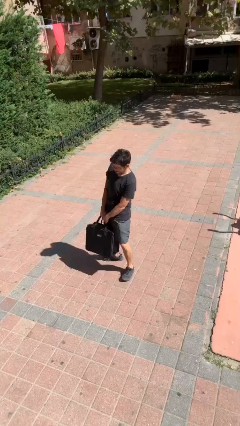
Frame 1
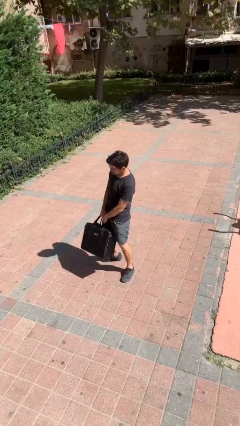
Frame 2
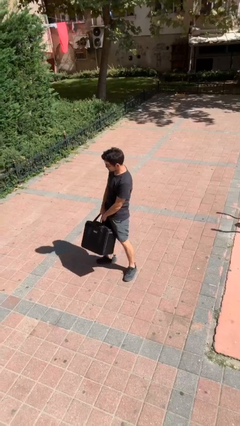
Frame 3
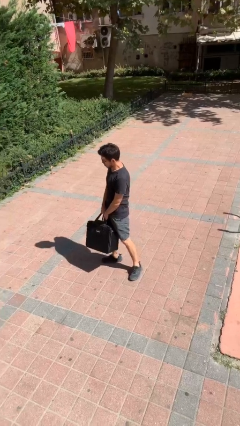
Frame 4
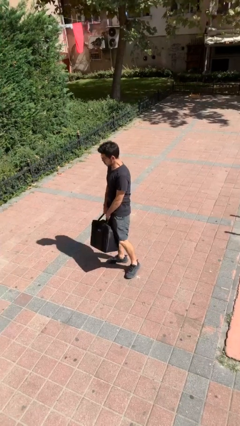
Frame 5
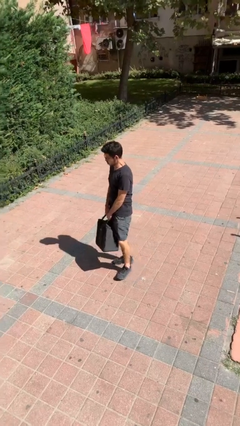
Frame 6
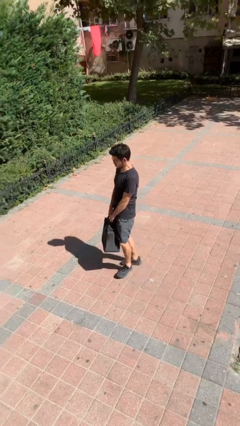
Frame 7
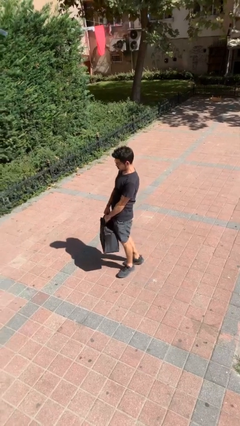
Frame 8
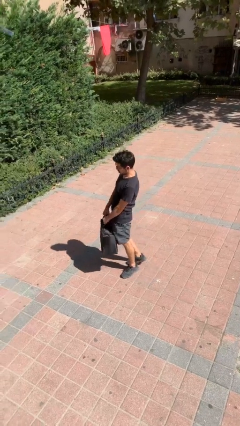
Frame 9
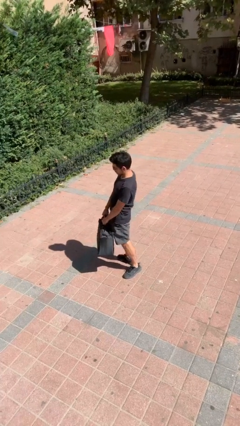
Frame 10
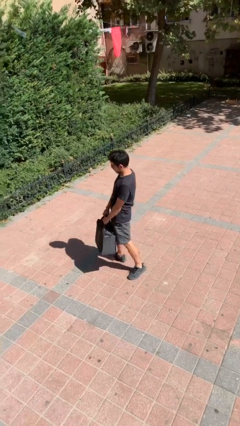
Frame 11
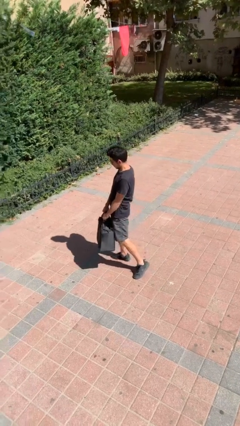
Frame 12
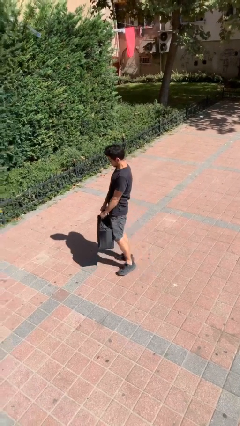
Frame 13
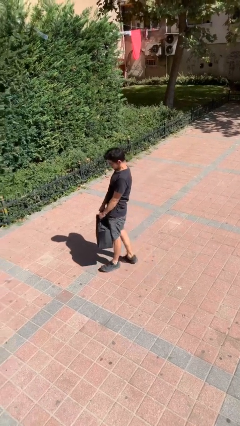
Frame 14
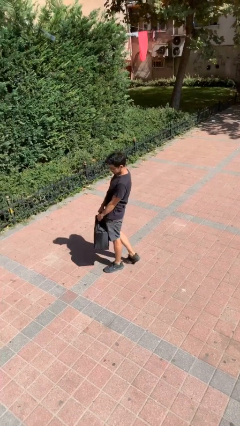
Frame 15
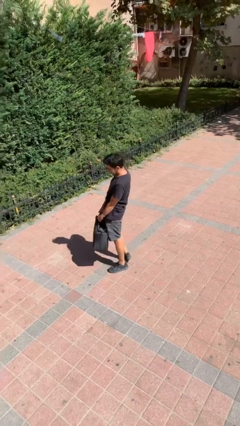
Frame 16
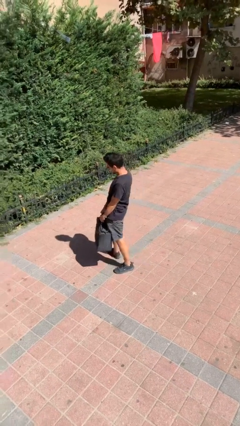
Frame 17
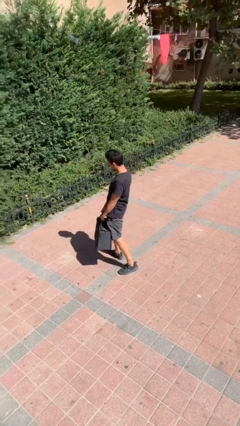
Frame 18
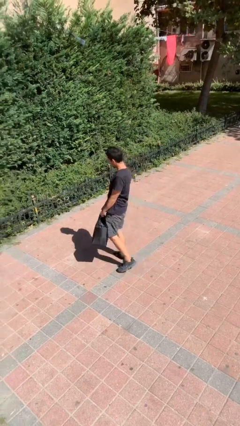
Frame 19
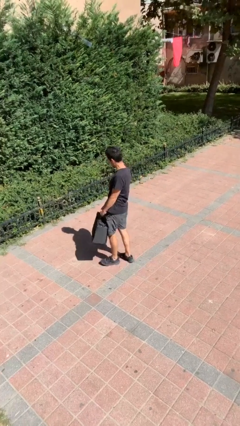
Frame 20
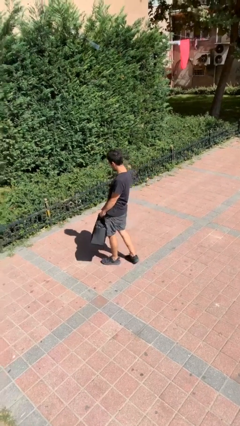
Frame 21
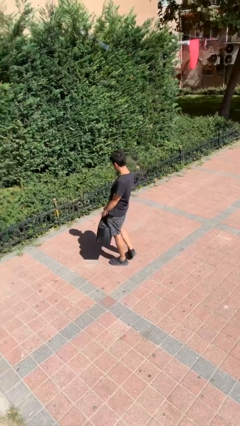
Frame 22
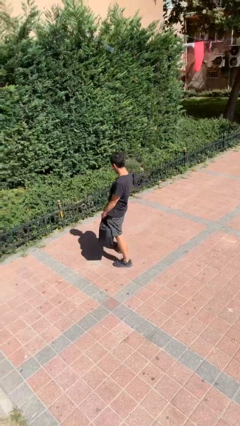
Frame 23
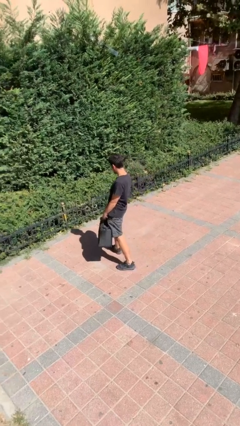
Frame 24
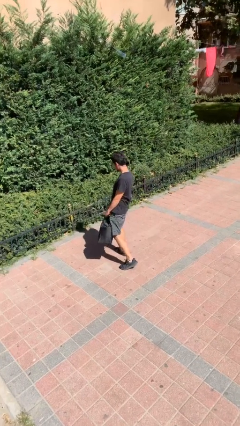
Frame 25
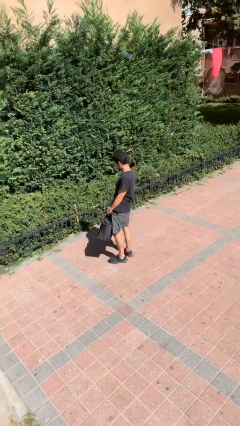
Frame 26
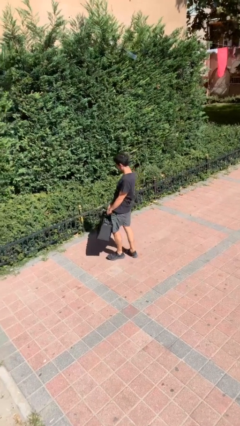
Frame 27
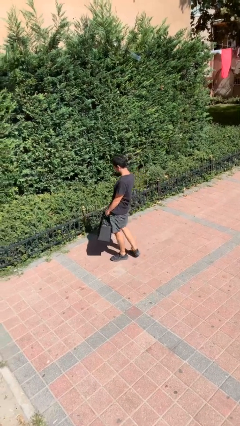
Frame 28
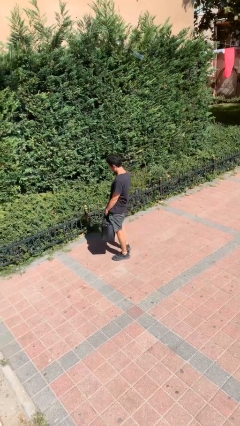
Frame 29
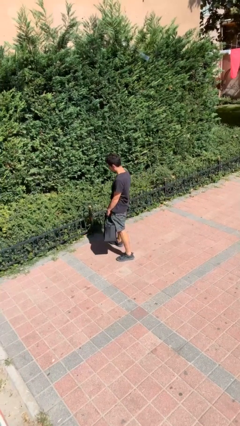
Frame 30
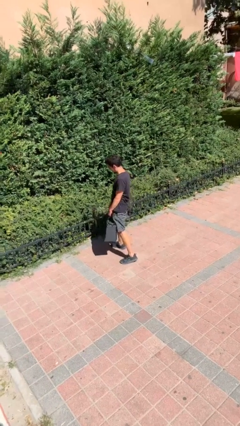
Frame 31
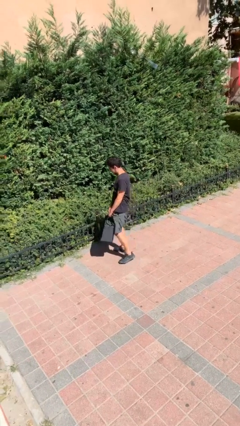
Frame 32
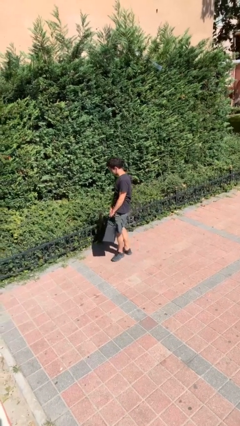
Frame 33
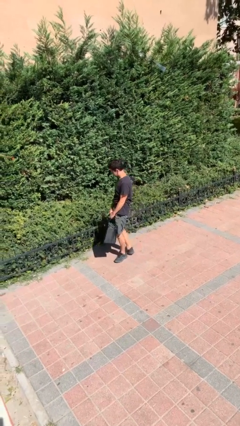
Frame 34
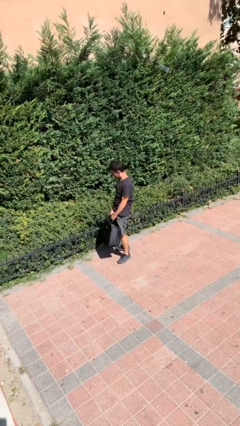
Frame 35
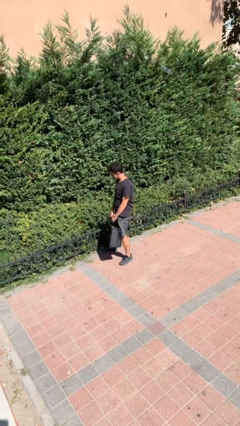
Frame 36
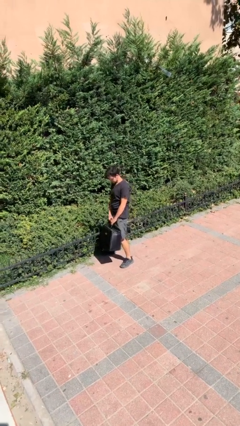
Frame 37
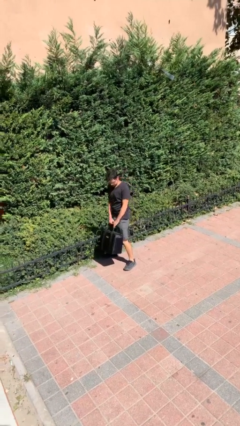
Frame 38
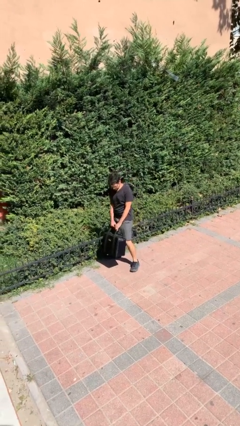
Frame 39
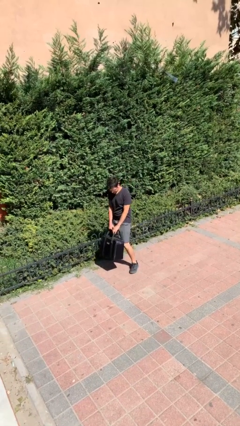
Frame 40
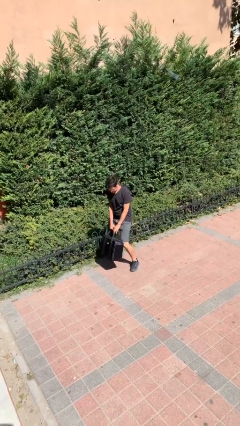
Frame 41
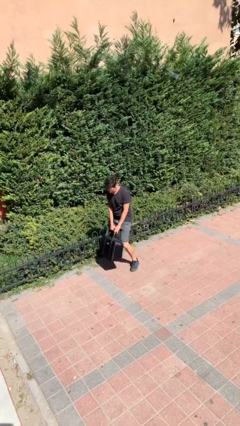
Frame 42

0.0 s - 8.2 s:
person carries heavy object

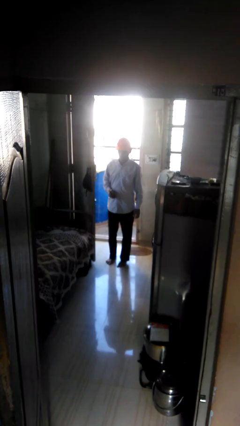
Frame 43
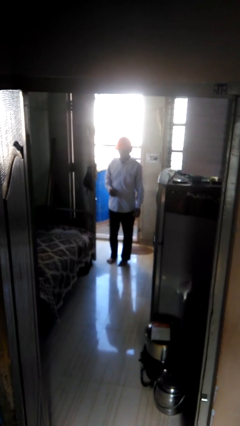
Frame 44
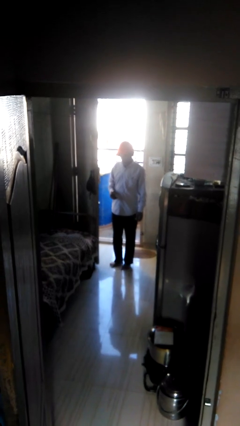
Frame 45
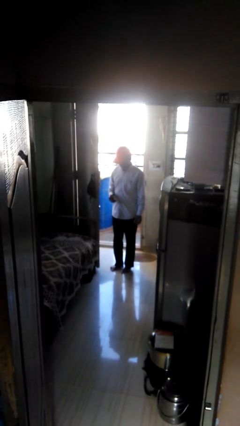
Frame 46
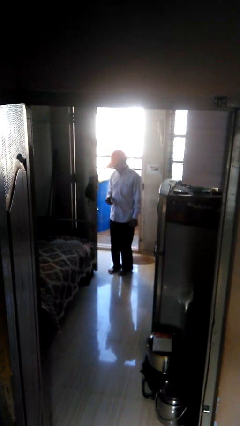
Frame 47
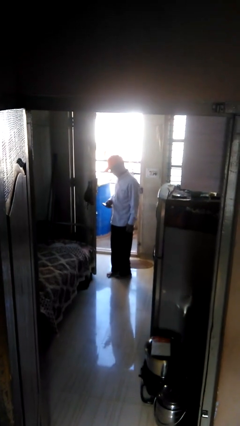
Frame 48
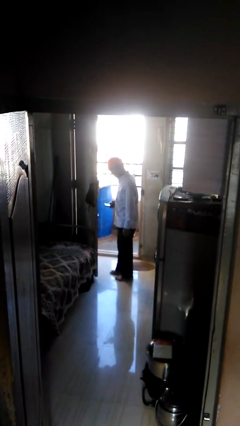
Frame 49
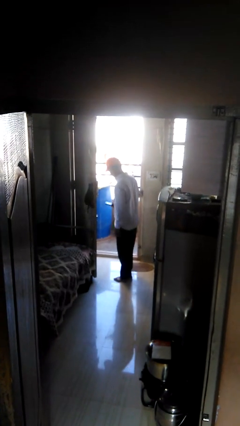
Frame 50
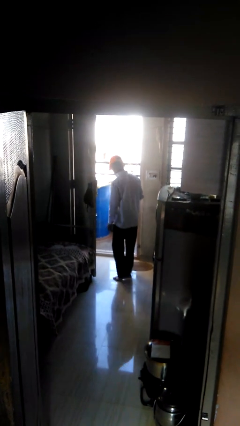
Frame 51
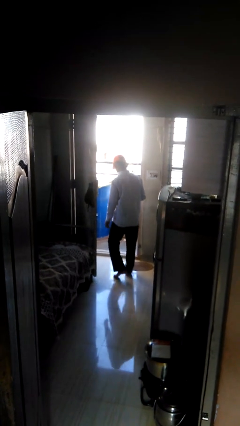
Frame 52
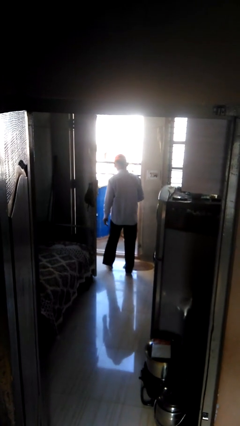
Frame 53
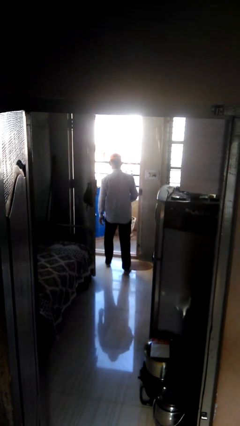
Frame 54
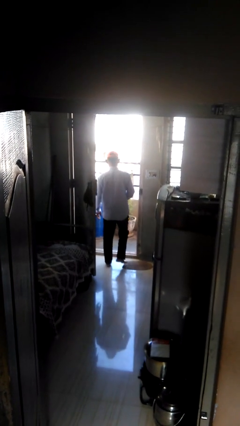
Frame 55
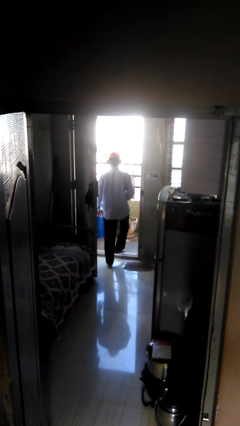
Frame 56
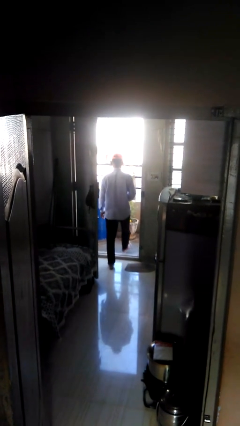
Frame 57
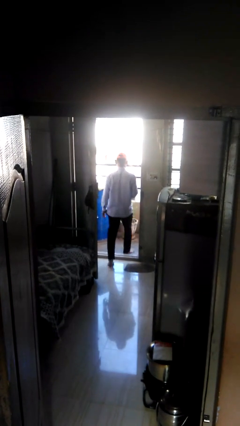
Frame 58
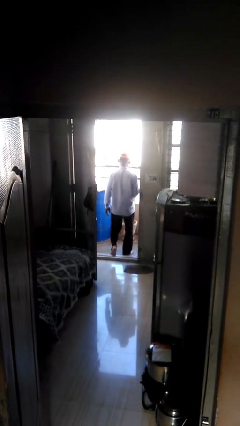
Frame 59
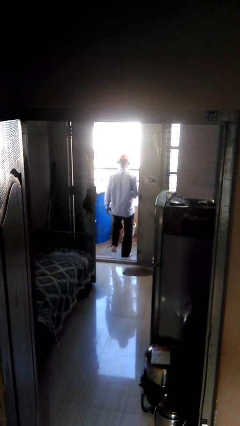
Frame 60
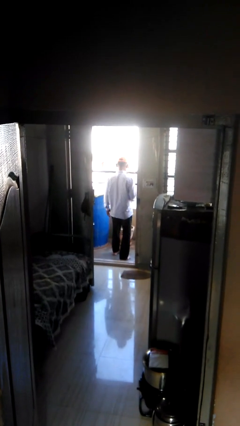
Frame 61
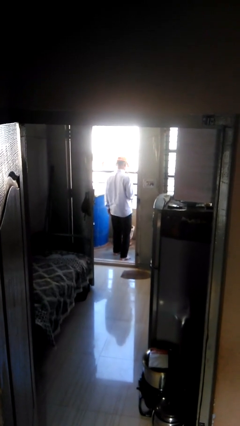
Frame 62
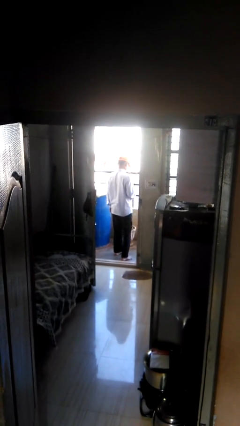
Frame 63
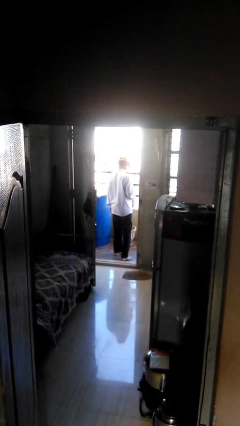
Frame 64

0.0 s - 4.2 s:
person exits scene through structure

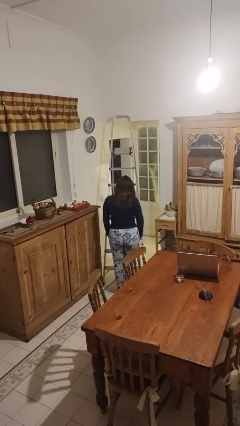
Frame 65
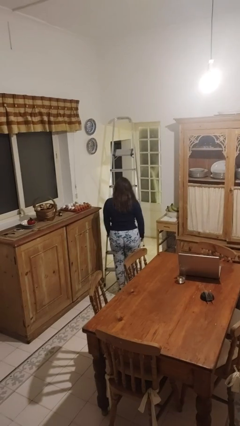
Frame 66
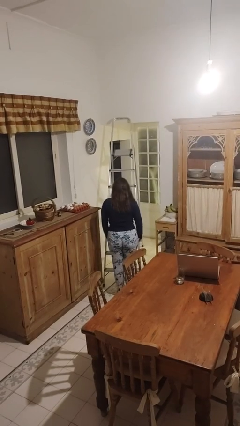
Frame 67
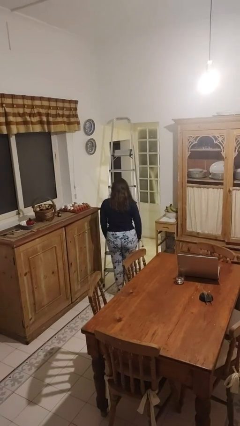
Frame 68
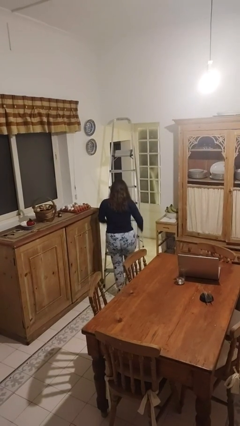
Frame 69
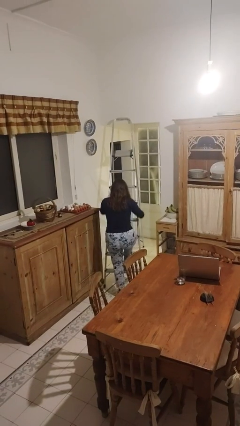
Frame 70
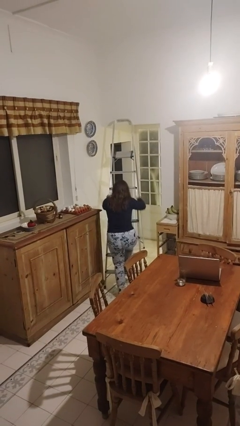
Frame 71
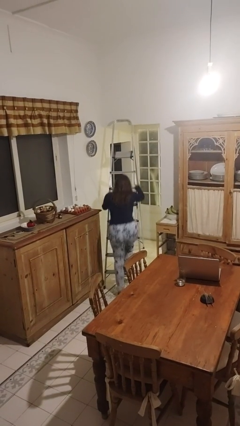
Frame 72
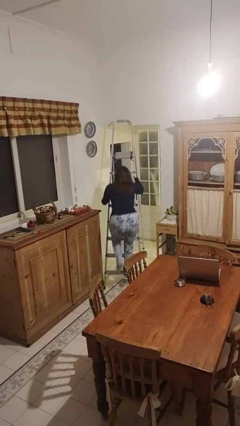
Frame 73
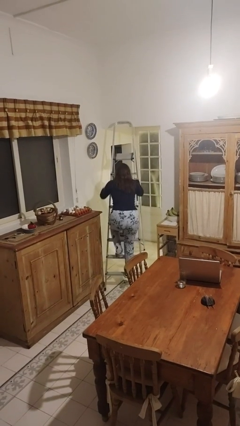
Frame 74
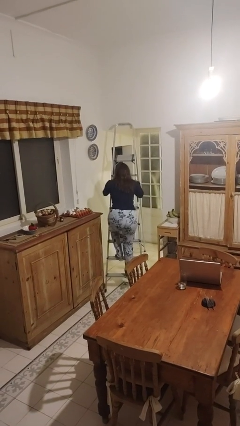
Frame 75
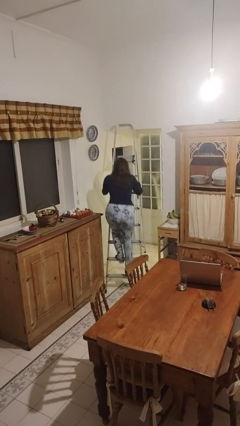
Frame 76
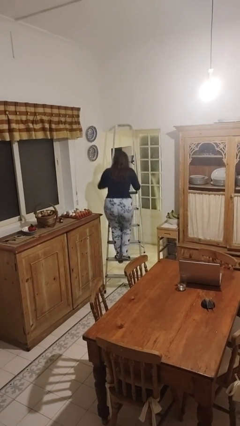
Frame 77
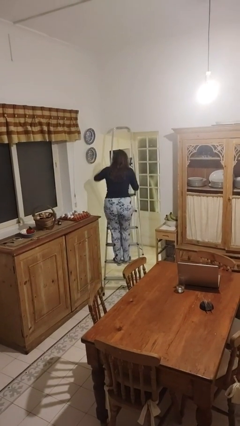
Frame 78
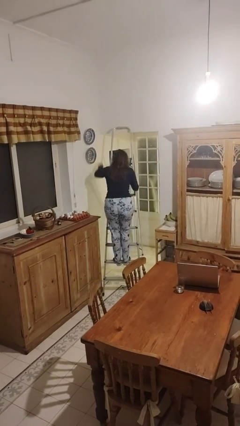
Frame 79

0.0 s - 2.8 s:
person climbs up ladder

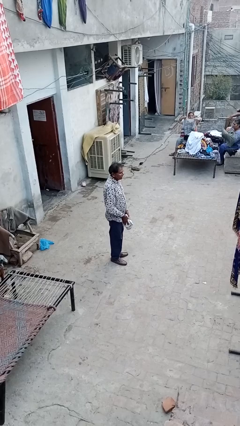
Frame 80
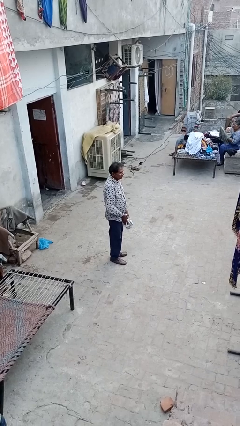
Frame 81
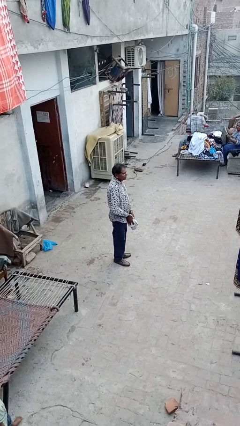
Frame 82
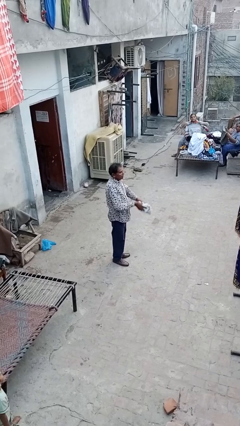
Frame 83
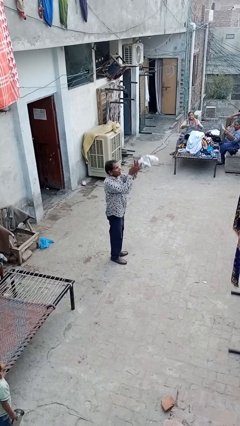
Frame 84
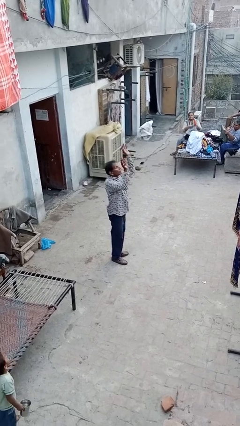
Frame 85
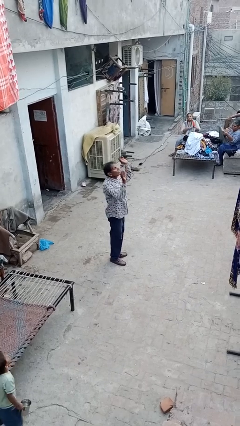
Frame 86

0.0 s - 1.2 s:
person drops object

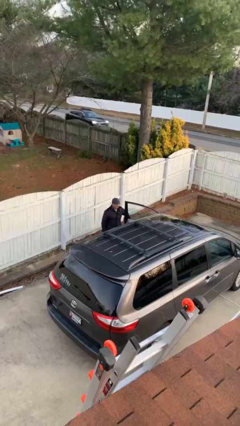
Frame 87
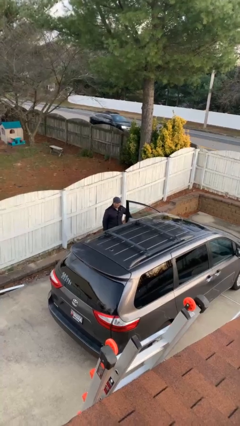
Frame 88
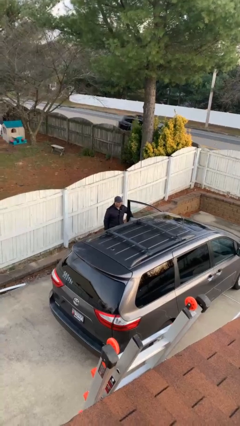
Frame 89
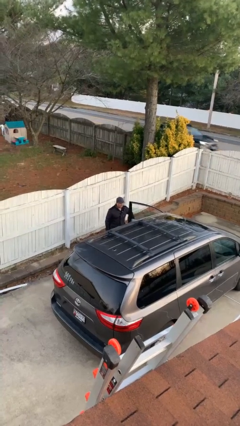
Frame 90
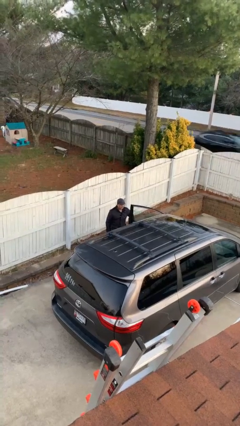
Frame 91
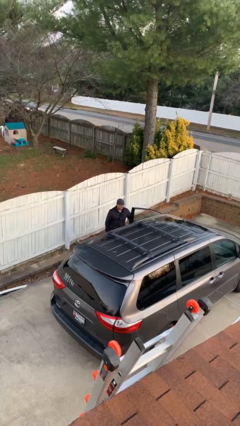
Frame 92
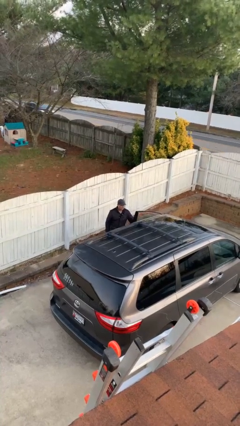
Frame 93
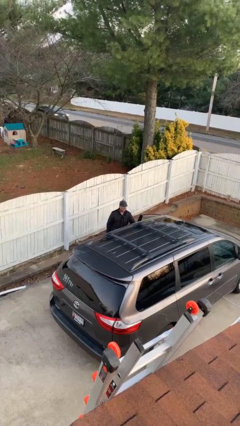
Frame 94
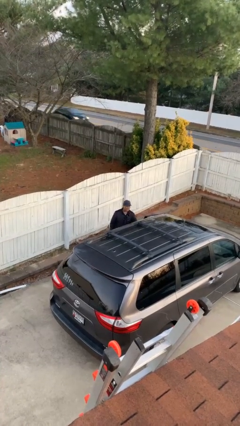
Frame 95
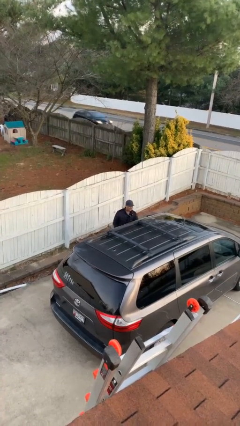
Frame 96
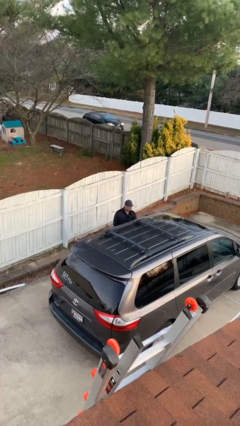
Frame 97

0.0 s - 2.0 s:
person closes car door
